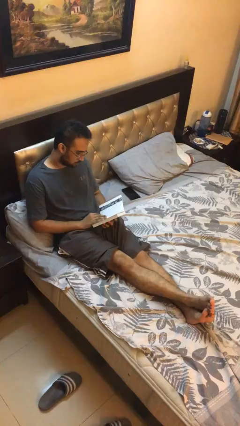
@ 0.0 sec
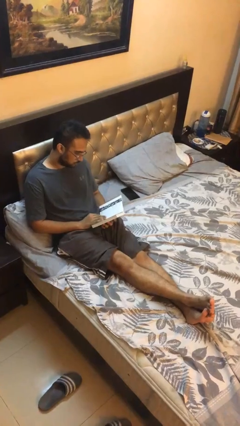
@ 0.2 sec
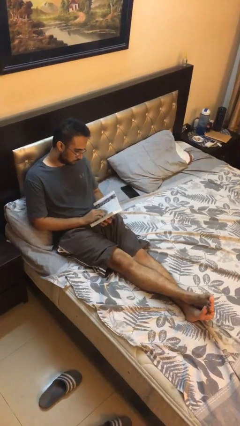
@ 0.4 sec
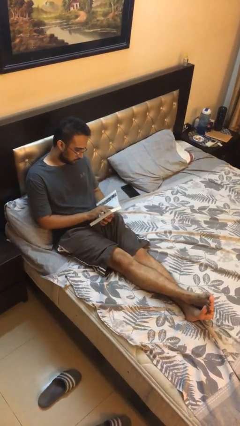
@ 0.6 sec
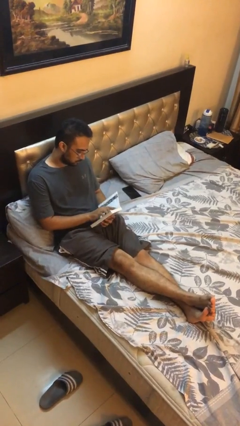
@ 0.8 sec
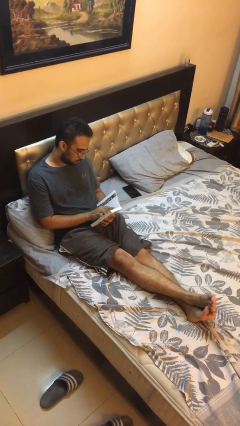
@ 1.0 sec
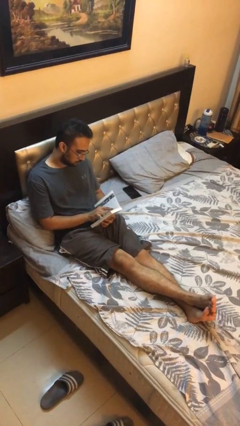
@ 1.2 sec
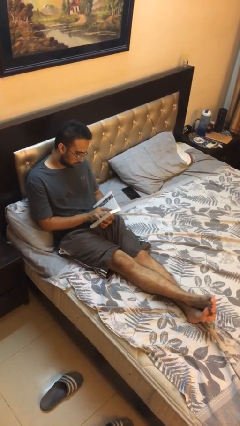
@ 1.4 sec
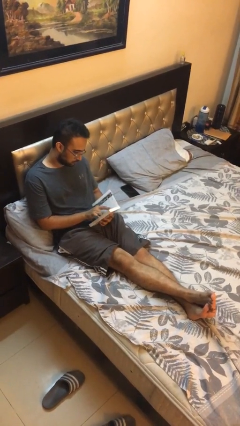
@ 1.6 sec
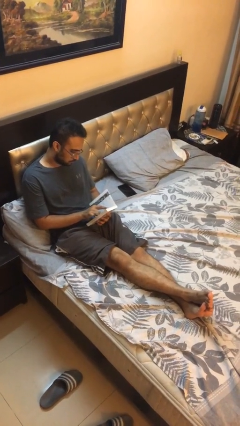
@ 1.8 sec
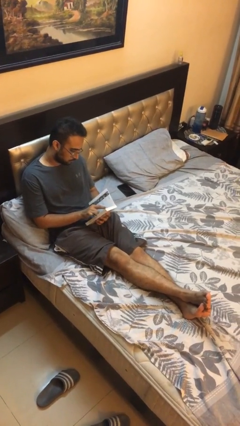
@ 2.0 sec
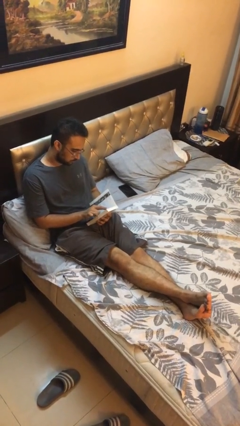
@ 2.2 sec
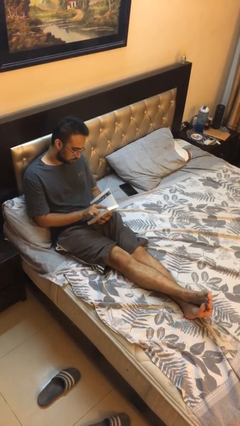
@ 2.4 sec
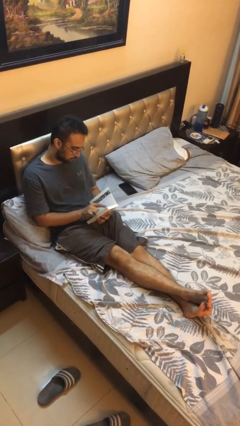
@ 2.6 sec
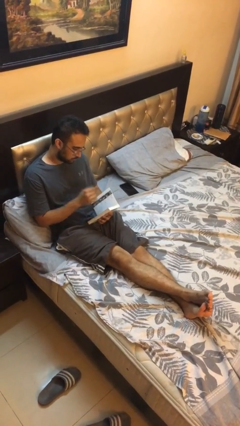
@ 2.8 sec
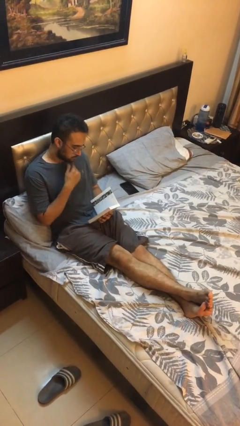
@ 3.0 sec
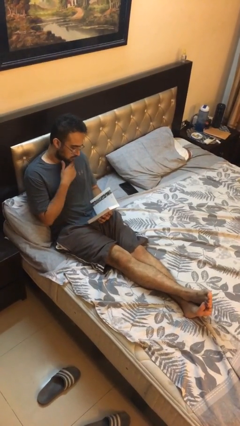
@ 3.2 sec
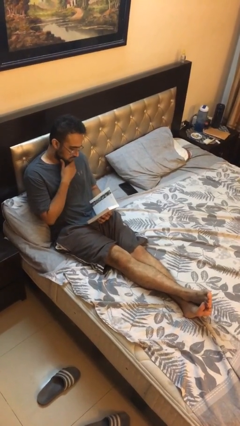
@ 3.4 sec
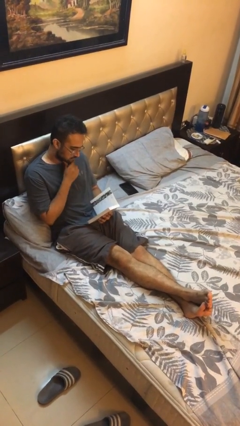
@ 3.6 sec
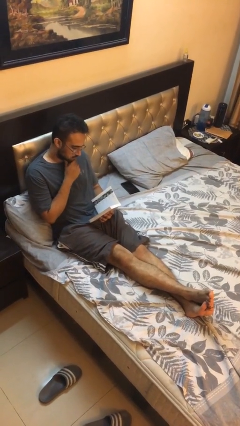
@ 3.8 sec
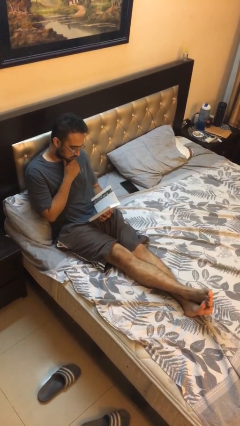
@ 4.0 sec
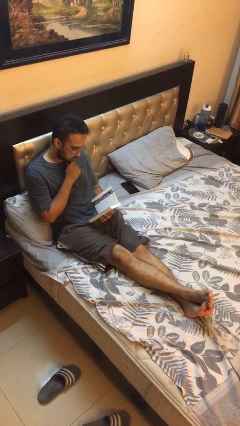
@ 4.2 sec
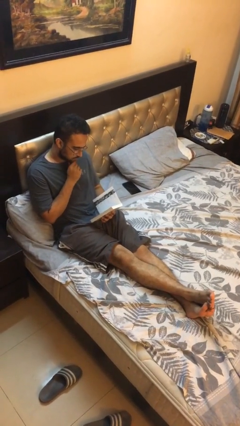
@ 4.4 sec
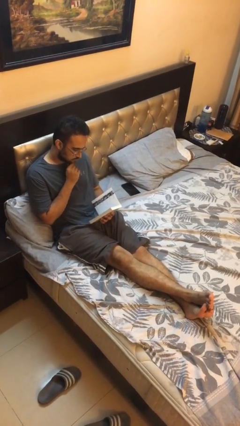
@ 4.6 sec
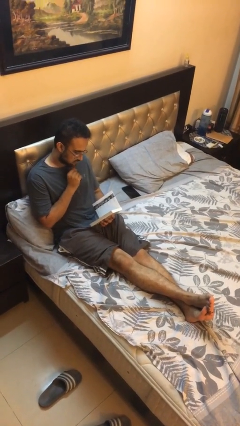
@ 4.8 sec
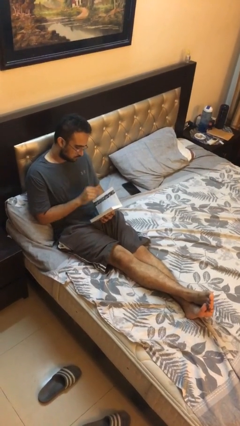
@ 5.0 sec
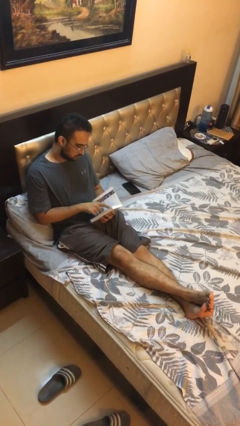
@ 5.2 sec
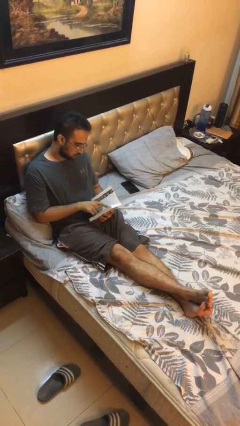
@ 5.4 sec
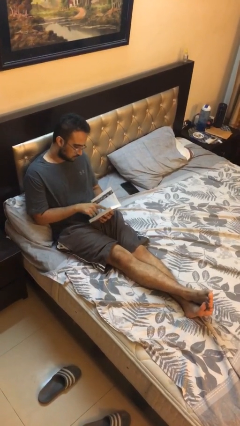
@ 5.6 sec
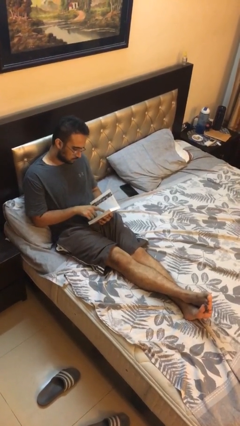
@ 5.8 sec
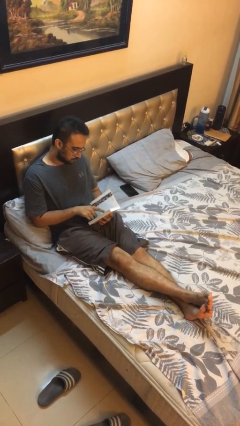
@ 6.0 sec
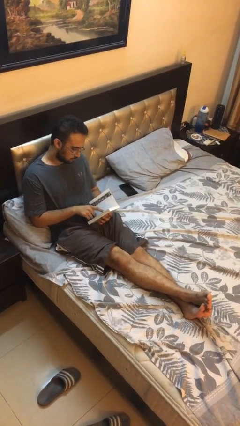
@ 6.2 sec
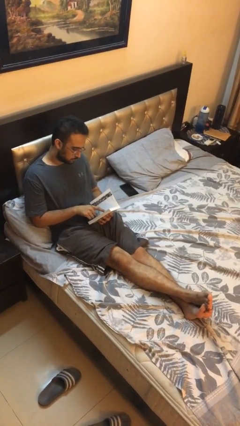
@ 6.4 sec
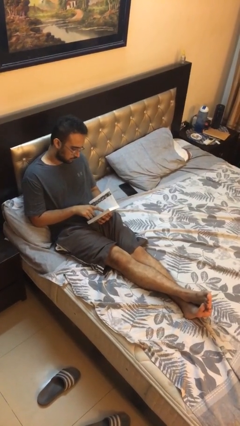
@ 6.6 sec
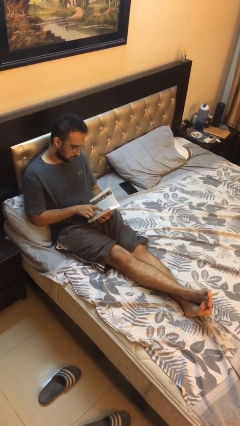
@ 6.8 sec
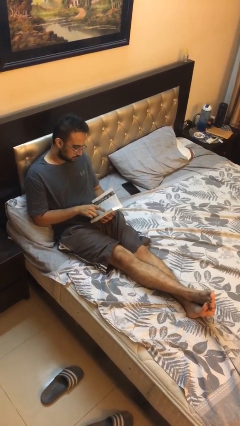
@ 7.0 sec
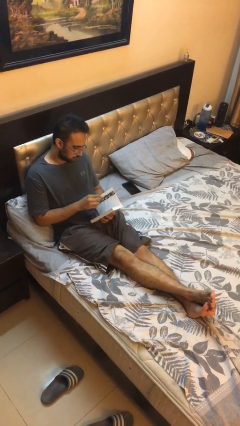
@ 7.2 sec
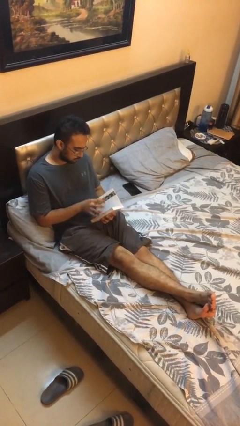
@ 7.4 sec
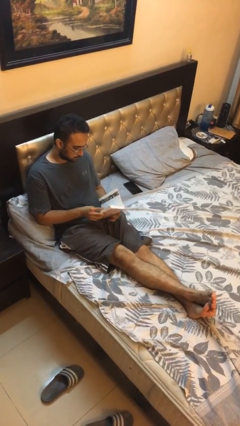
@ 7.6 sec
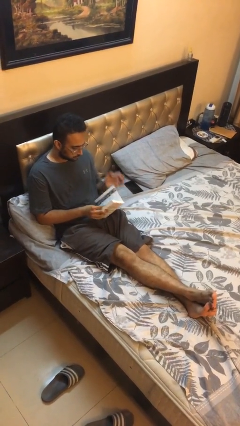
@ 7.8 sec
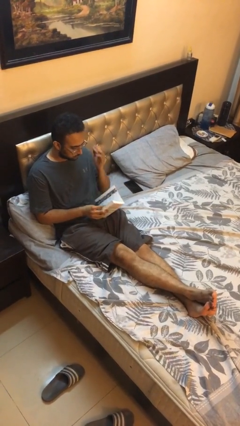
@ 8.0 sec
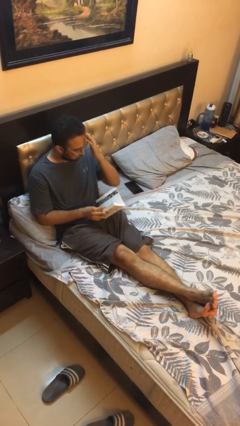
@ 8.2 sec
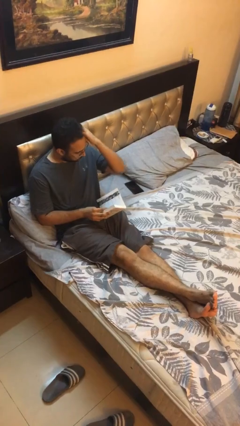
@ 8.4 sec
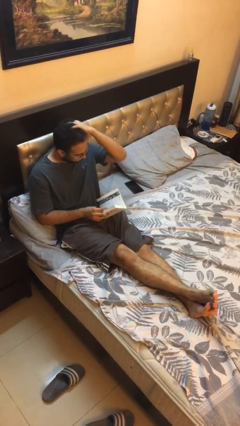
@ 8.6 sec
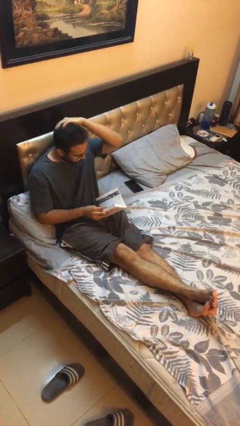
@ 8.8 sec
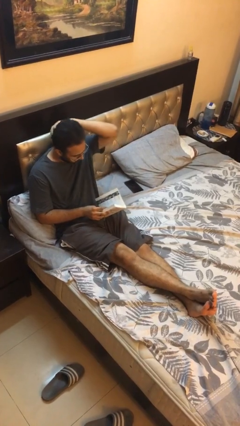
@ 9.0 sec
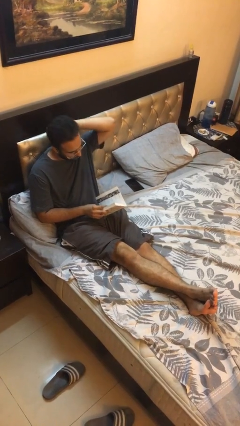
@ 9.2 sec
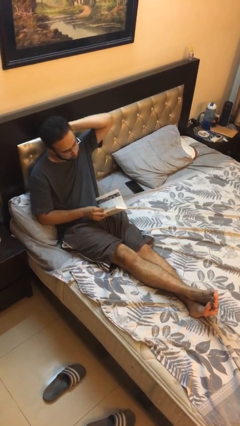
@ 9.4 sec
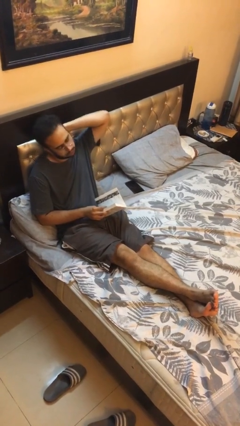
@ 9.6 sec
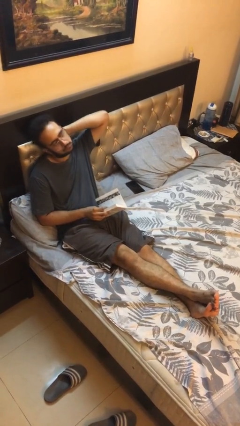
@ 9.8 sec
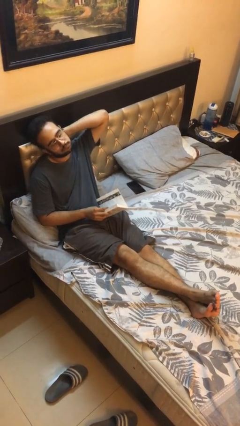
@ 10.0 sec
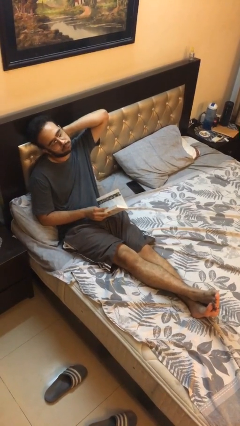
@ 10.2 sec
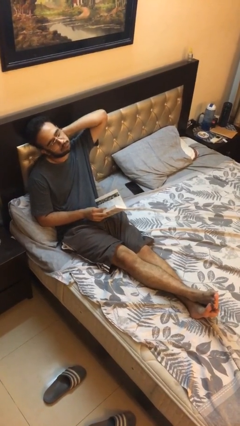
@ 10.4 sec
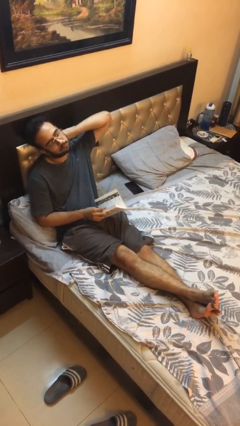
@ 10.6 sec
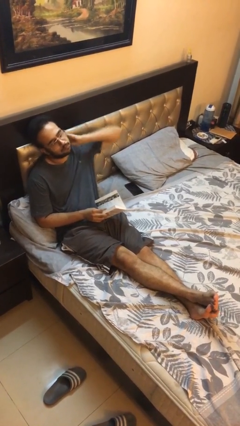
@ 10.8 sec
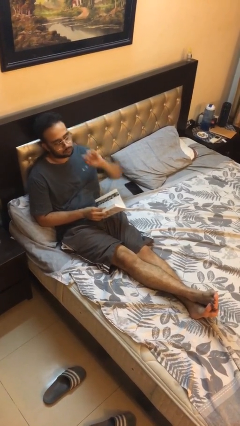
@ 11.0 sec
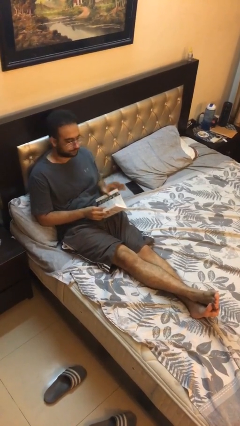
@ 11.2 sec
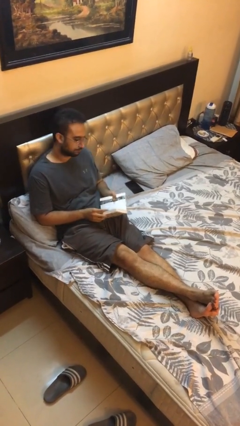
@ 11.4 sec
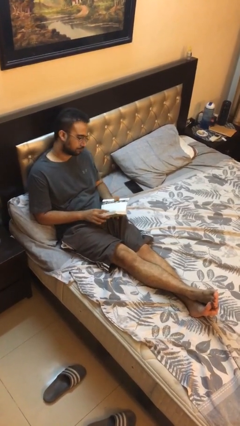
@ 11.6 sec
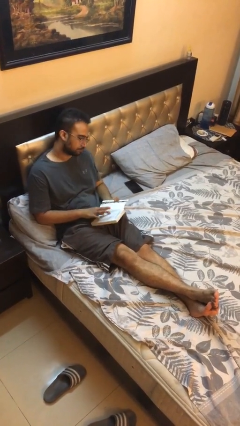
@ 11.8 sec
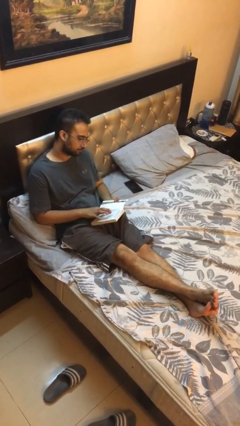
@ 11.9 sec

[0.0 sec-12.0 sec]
person reads document

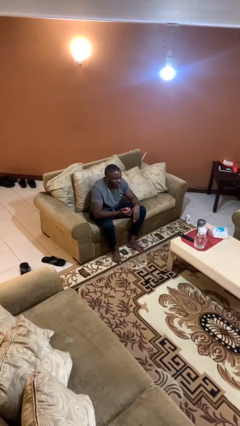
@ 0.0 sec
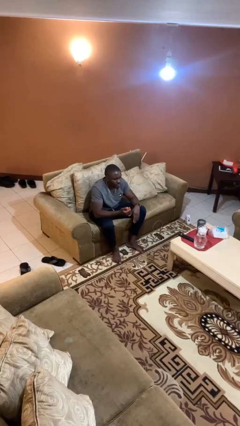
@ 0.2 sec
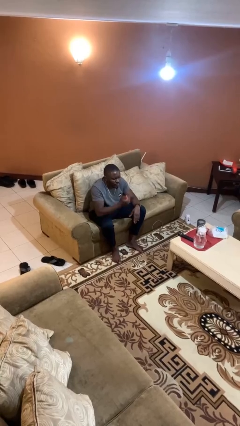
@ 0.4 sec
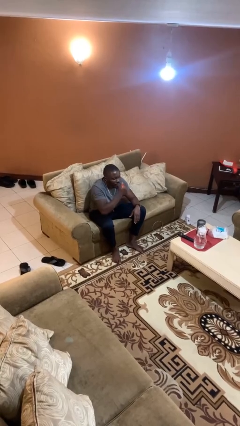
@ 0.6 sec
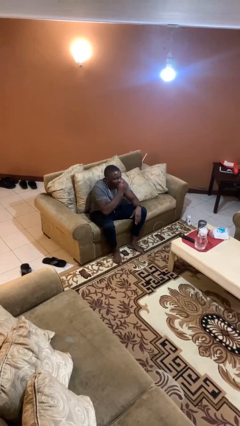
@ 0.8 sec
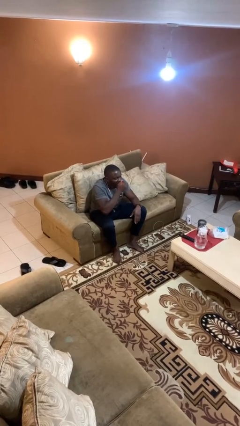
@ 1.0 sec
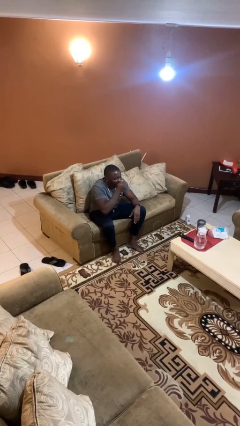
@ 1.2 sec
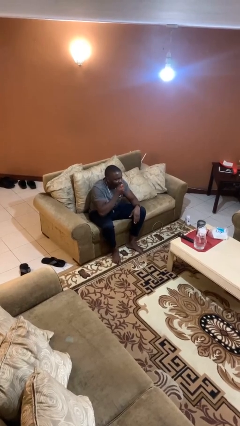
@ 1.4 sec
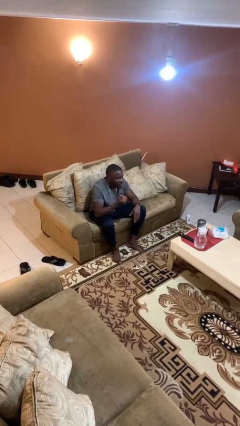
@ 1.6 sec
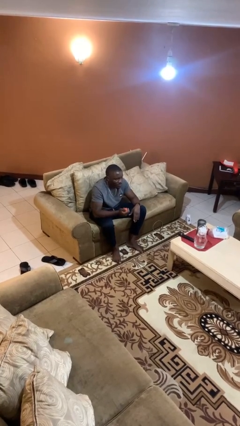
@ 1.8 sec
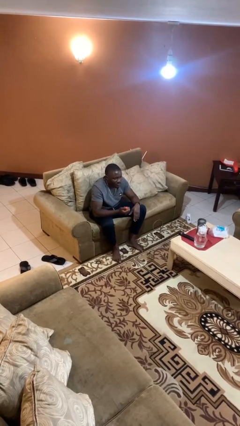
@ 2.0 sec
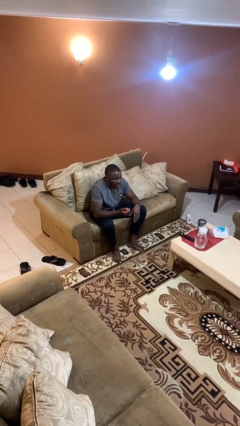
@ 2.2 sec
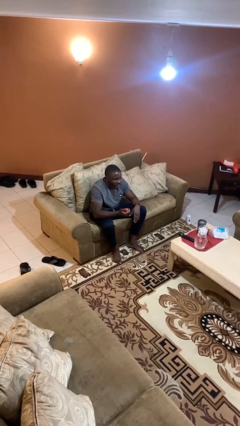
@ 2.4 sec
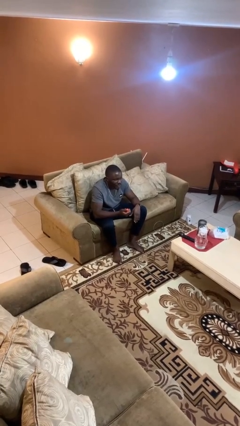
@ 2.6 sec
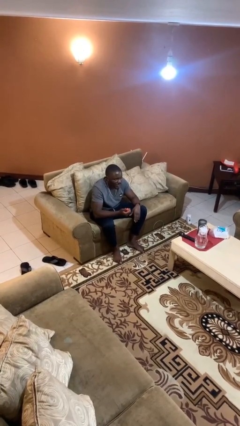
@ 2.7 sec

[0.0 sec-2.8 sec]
person eats apple

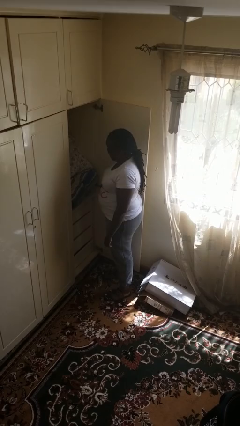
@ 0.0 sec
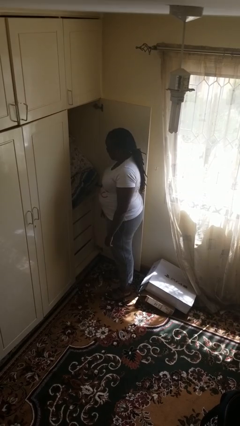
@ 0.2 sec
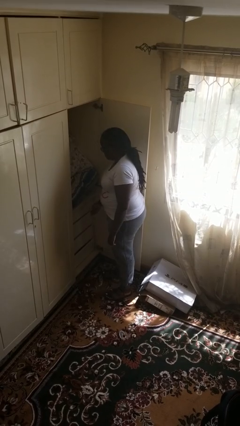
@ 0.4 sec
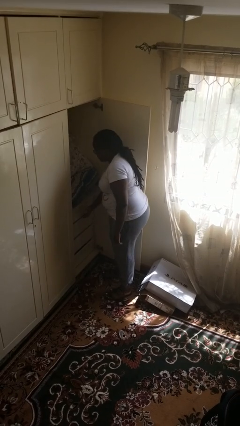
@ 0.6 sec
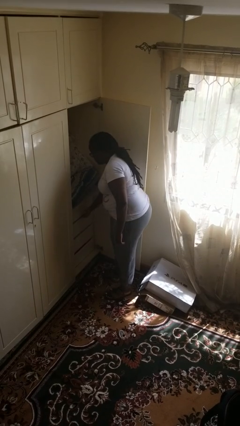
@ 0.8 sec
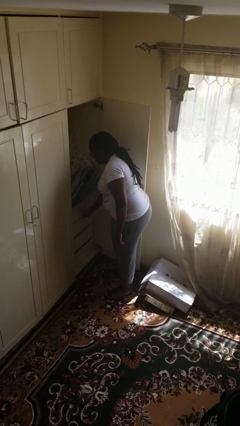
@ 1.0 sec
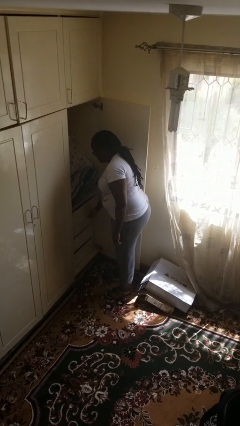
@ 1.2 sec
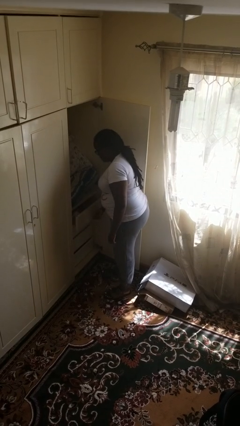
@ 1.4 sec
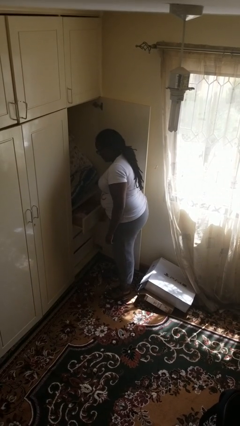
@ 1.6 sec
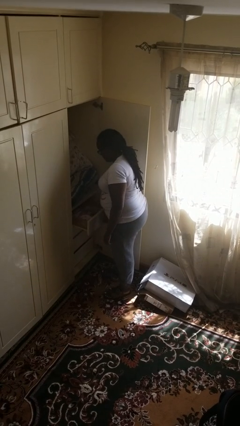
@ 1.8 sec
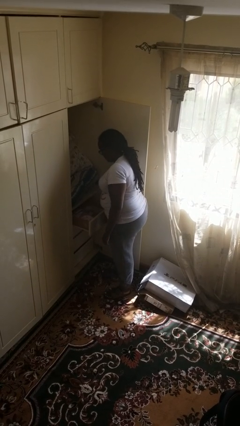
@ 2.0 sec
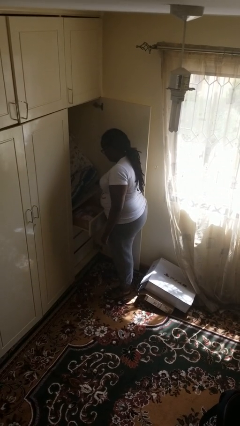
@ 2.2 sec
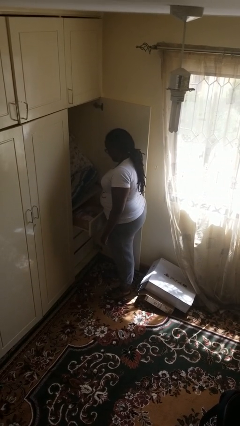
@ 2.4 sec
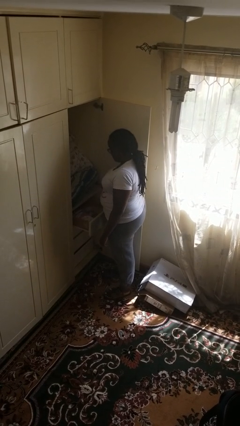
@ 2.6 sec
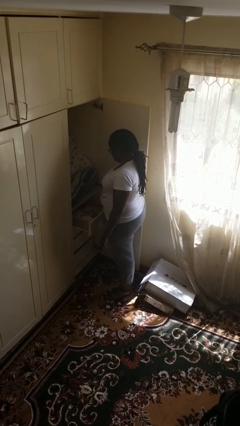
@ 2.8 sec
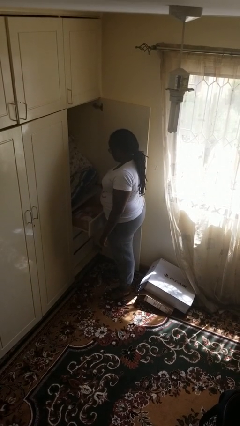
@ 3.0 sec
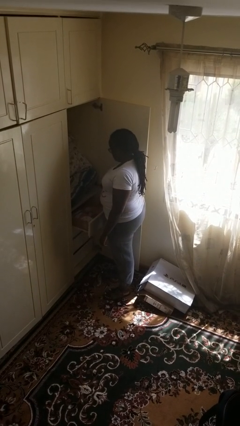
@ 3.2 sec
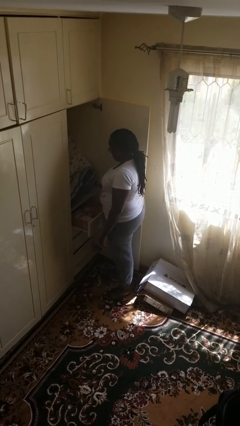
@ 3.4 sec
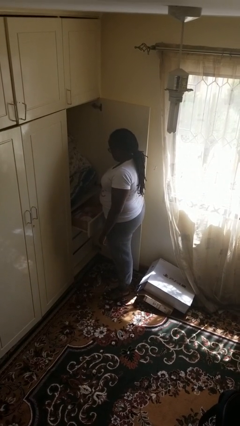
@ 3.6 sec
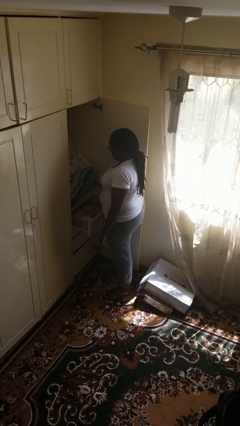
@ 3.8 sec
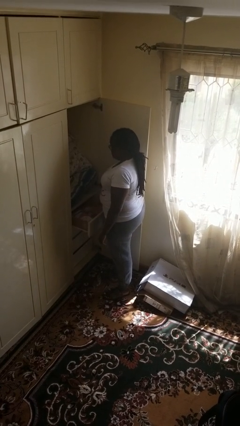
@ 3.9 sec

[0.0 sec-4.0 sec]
person opens dresser drawer
